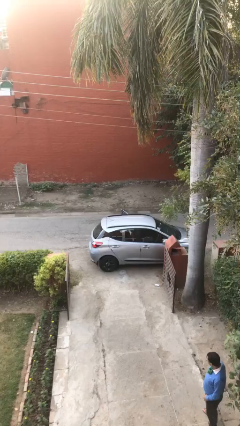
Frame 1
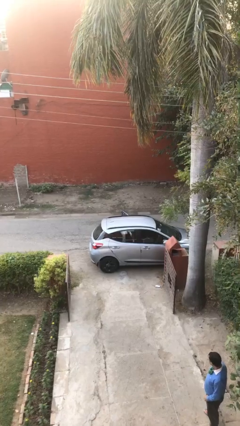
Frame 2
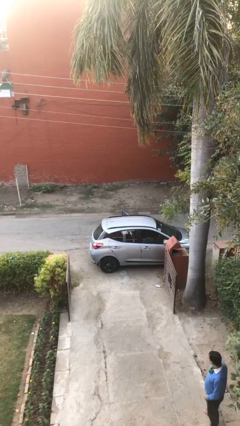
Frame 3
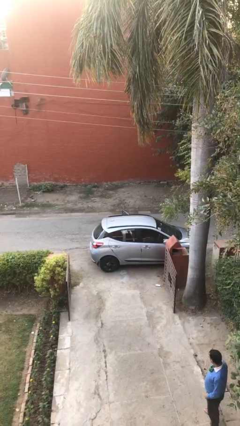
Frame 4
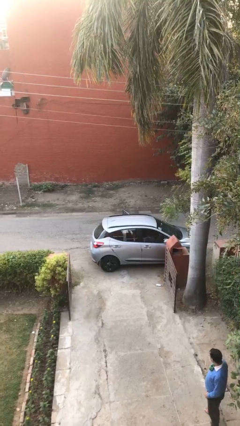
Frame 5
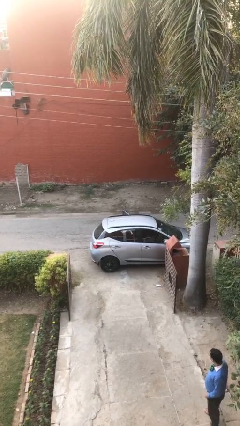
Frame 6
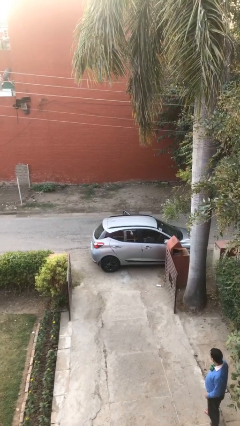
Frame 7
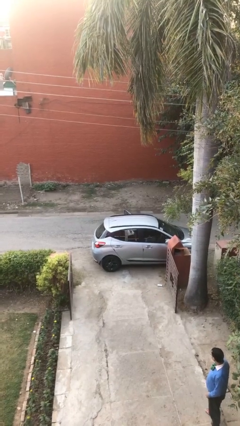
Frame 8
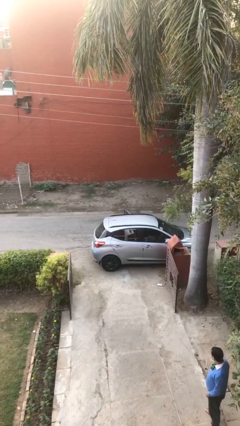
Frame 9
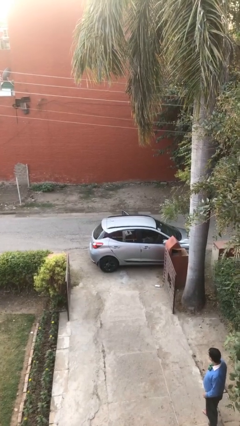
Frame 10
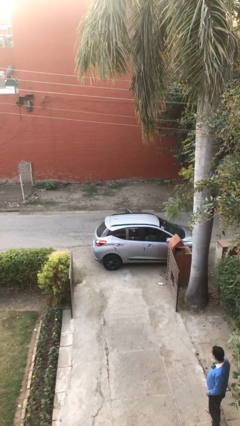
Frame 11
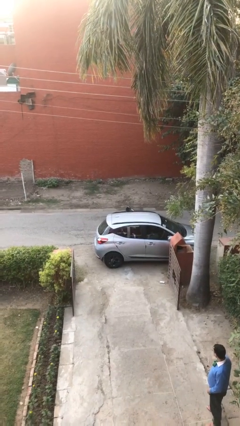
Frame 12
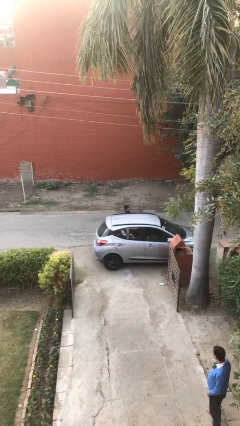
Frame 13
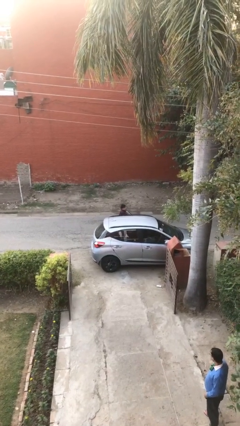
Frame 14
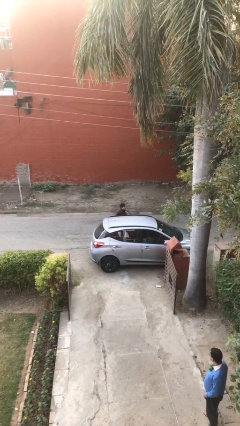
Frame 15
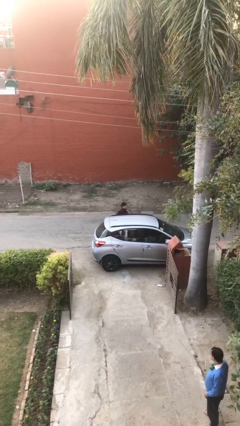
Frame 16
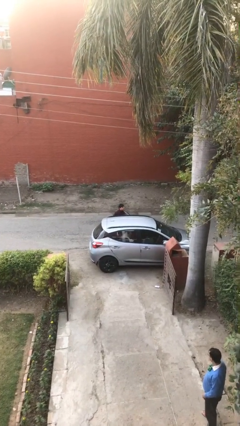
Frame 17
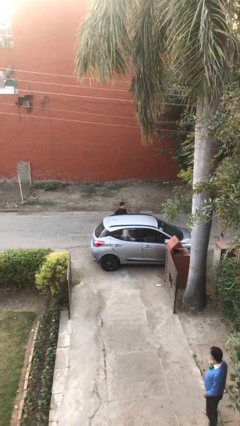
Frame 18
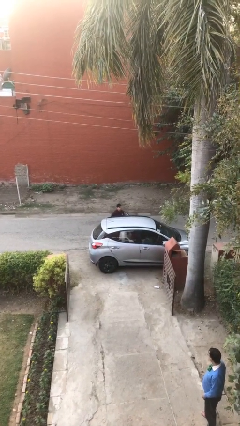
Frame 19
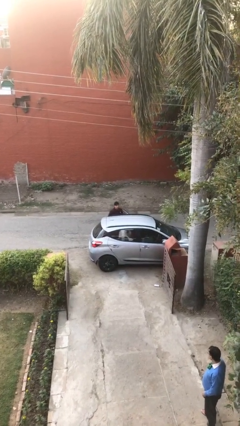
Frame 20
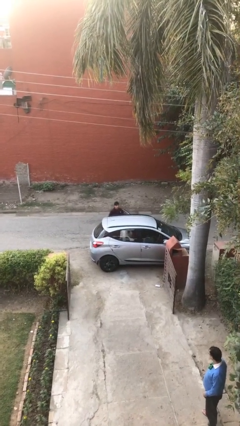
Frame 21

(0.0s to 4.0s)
person exits car

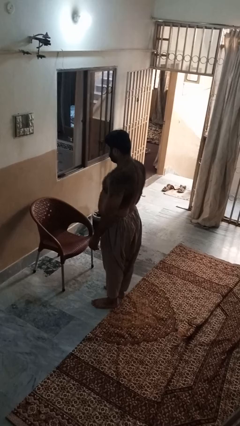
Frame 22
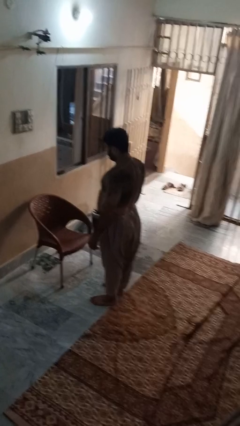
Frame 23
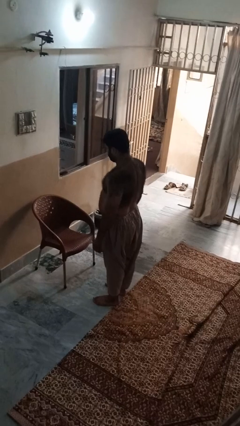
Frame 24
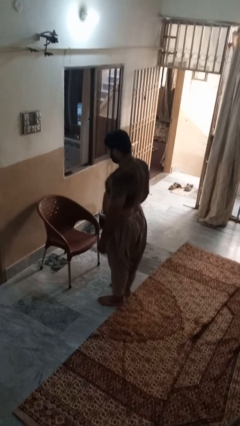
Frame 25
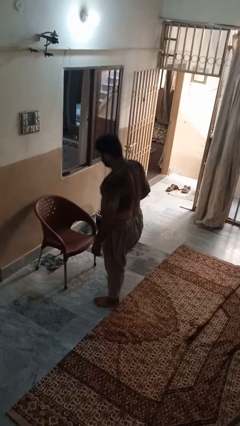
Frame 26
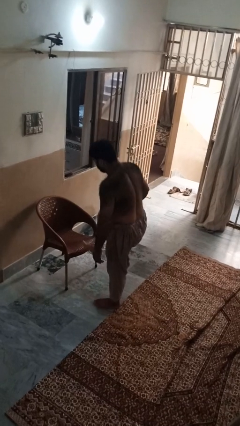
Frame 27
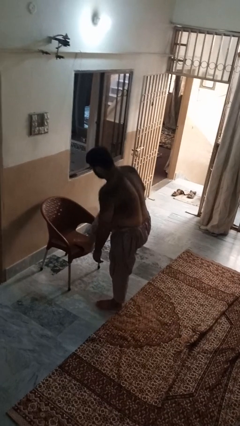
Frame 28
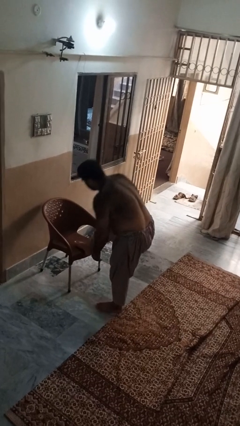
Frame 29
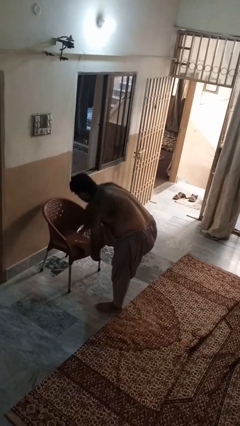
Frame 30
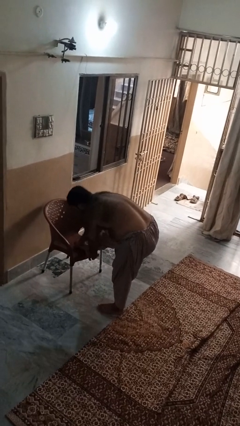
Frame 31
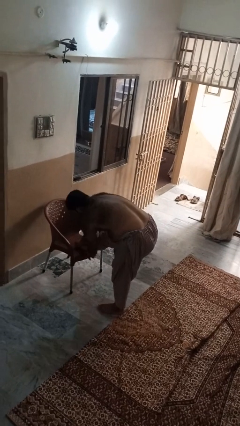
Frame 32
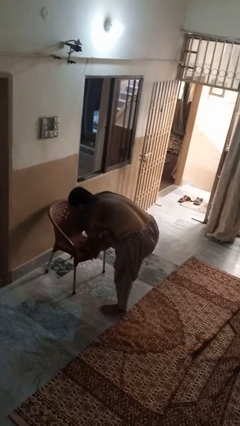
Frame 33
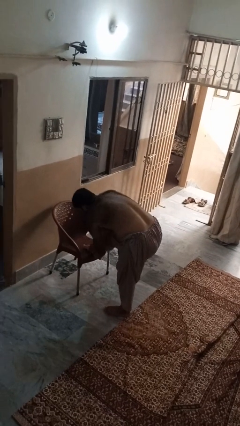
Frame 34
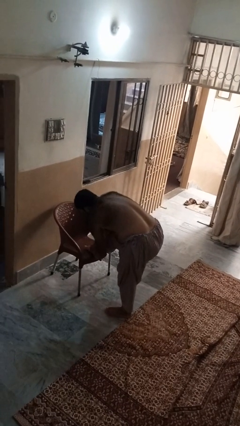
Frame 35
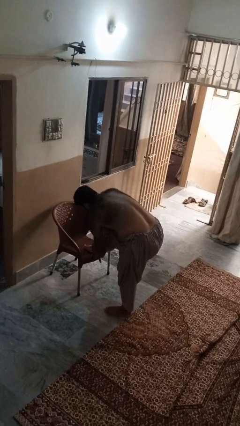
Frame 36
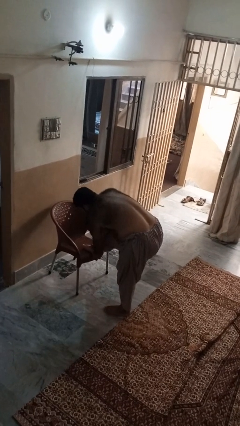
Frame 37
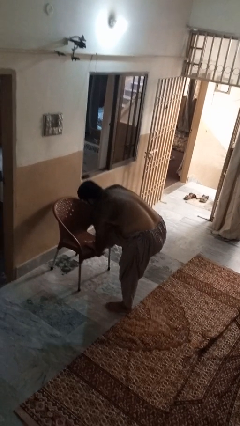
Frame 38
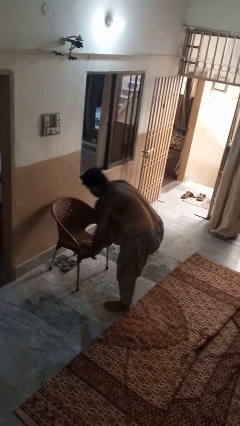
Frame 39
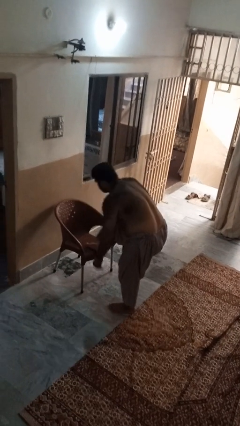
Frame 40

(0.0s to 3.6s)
person stubs toe

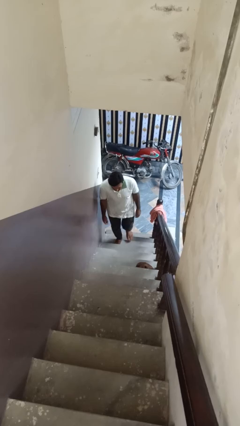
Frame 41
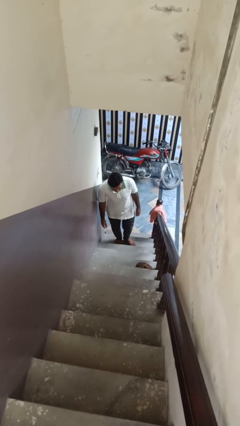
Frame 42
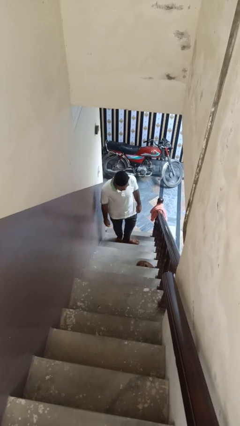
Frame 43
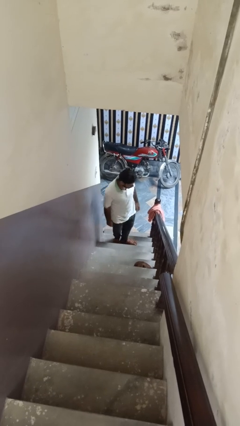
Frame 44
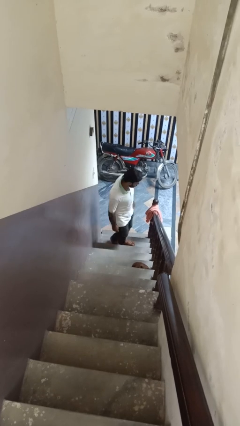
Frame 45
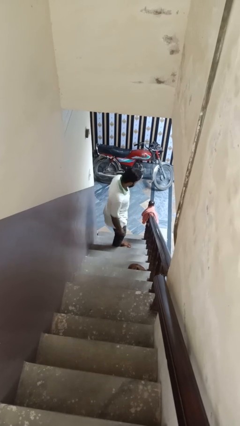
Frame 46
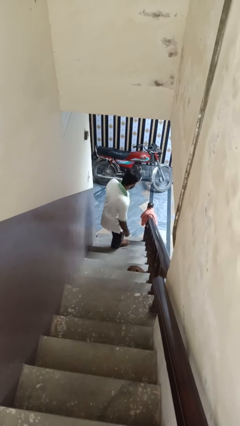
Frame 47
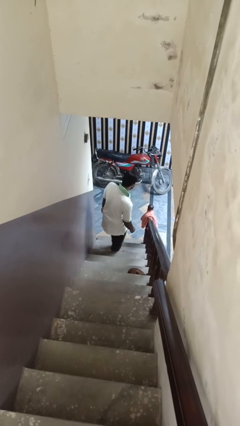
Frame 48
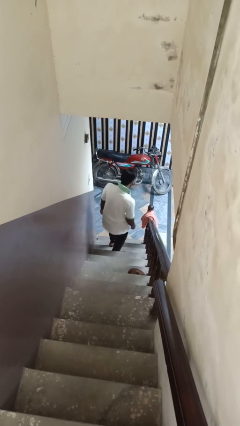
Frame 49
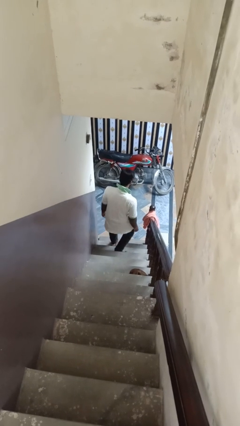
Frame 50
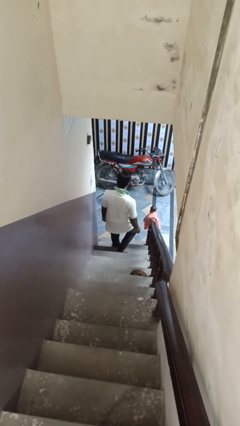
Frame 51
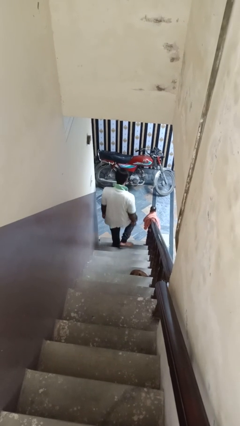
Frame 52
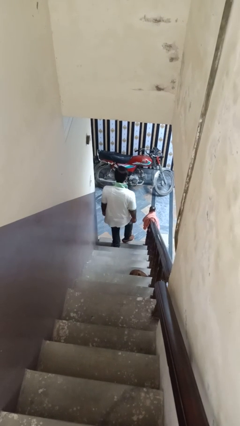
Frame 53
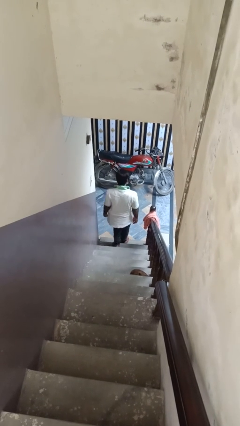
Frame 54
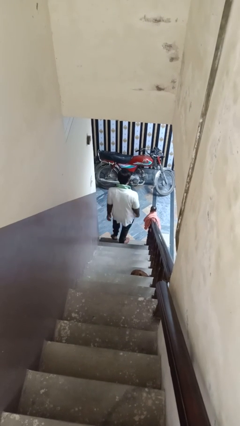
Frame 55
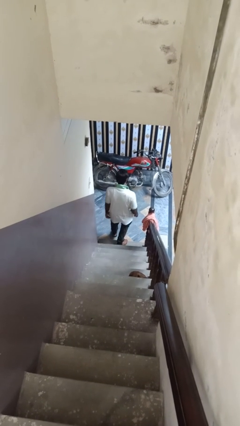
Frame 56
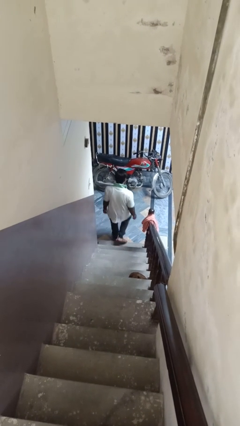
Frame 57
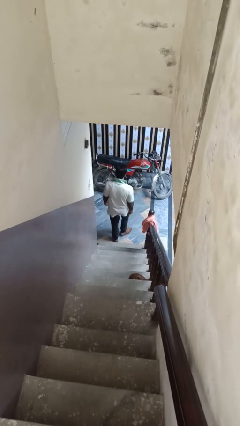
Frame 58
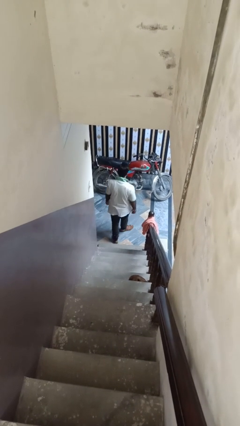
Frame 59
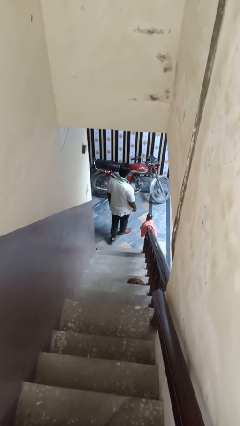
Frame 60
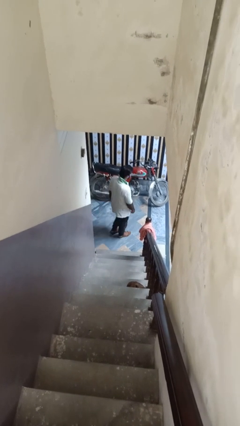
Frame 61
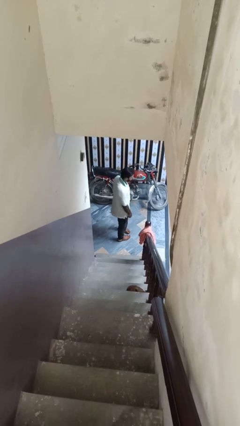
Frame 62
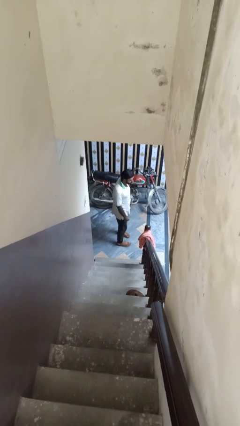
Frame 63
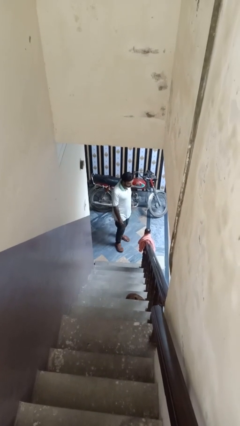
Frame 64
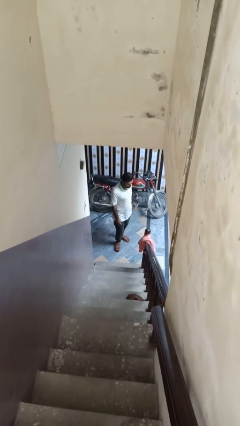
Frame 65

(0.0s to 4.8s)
person climbs down ladder

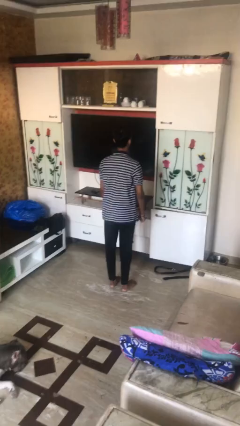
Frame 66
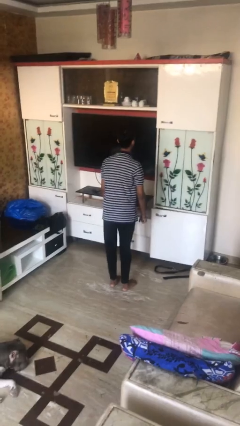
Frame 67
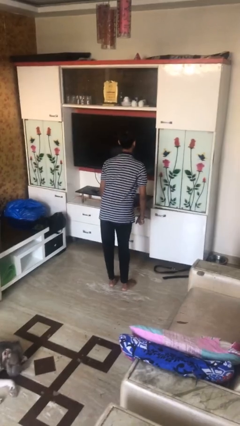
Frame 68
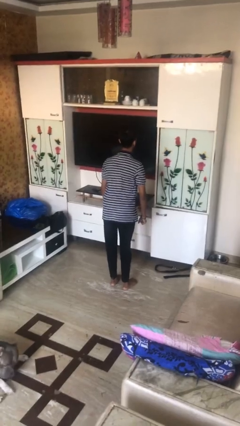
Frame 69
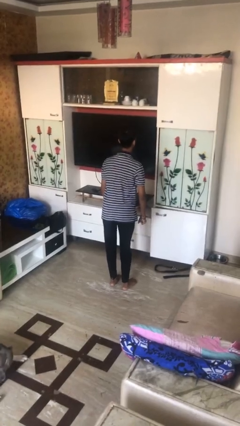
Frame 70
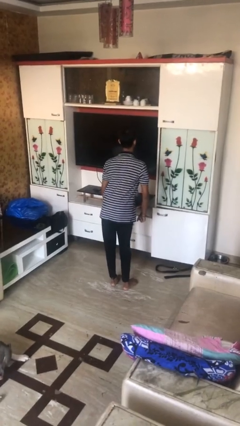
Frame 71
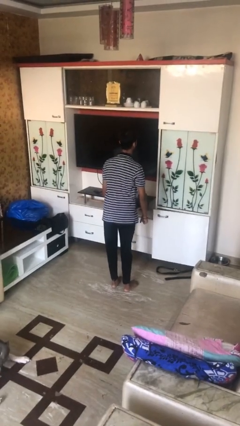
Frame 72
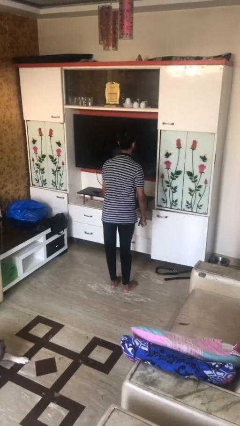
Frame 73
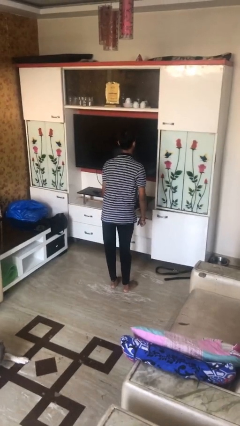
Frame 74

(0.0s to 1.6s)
person wiggles hips

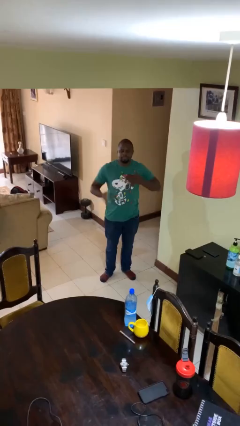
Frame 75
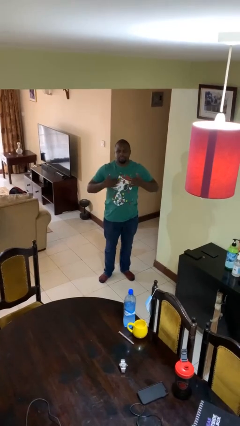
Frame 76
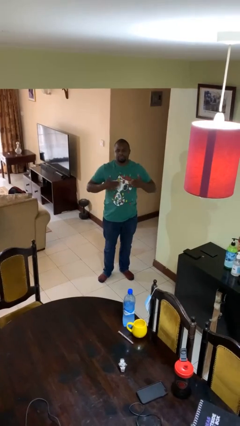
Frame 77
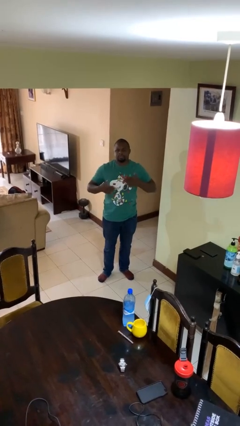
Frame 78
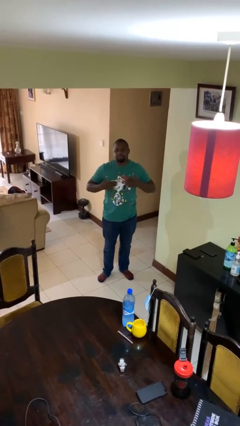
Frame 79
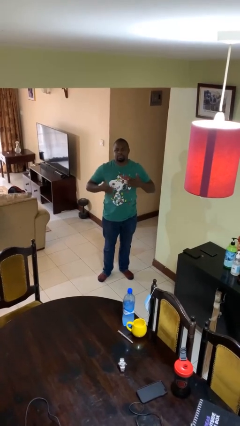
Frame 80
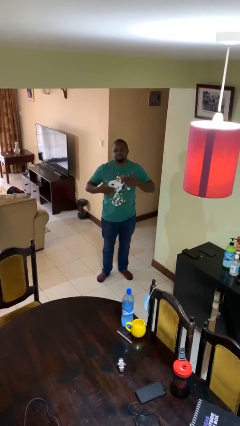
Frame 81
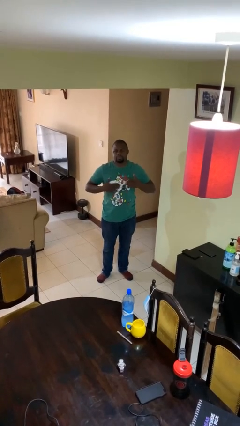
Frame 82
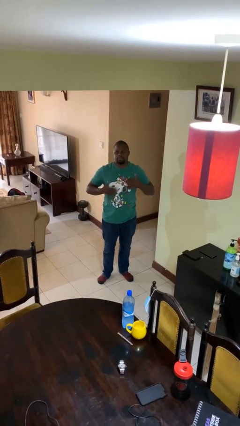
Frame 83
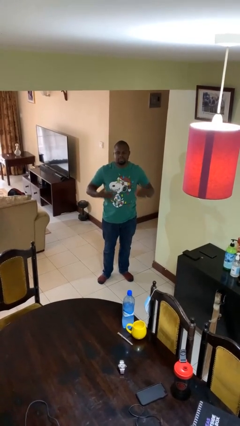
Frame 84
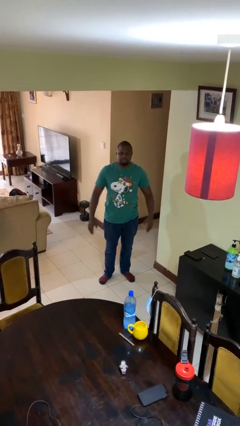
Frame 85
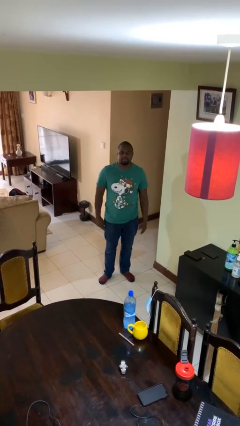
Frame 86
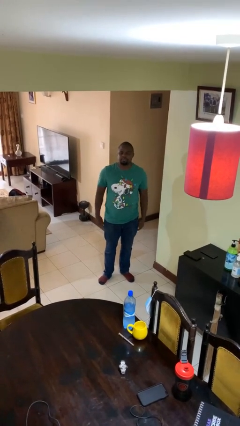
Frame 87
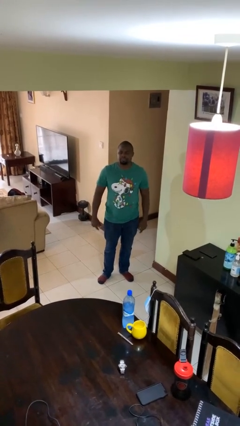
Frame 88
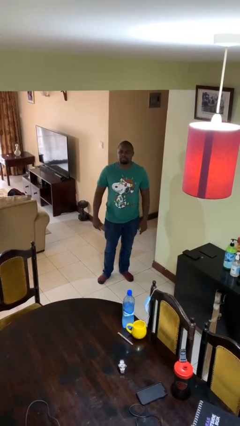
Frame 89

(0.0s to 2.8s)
person drums on chest

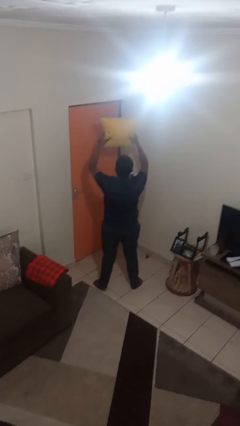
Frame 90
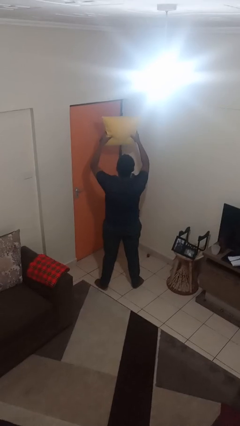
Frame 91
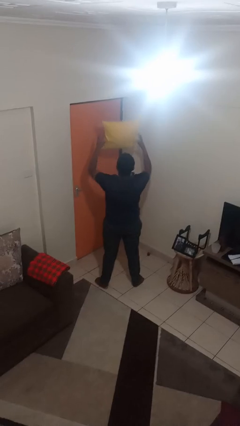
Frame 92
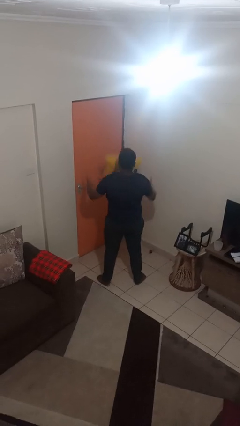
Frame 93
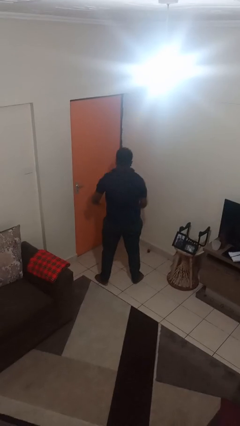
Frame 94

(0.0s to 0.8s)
person drops object
